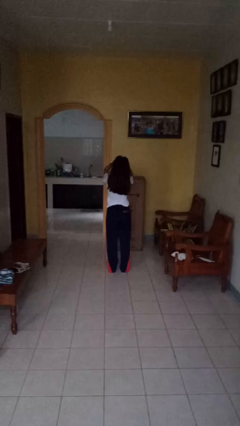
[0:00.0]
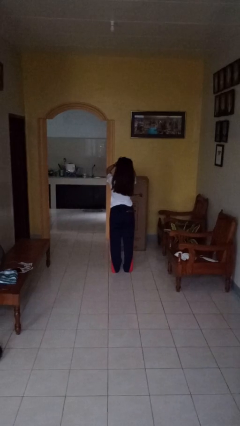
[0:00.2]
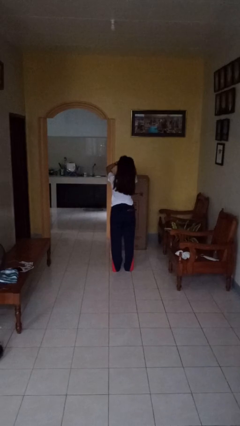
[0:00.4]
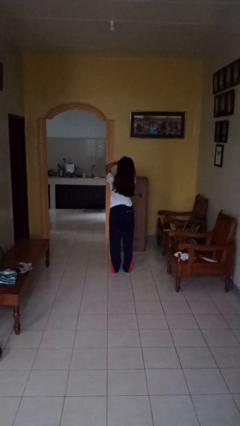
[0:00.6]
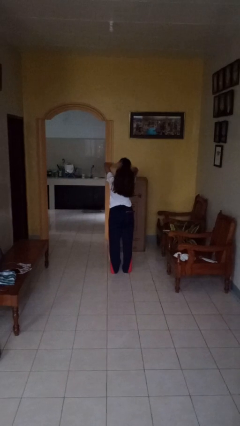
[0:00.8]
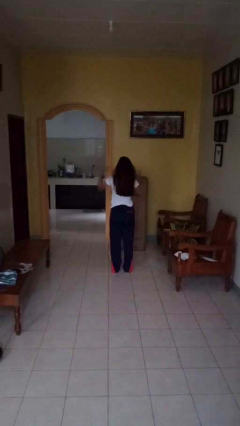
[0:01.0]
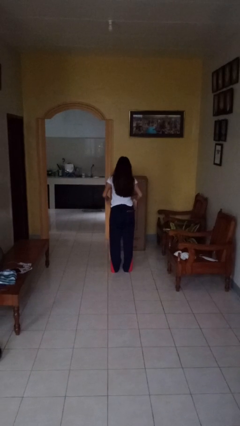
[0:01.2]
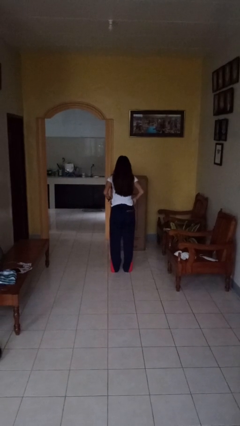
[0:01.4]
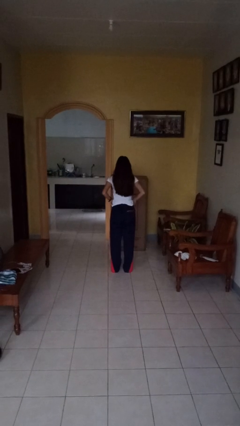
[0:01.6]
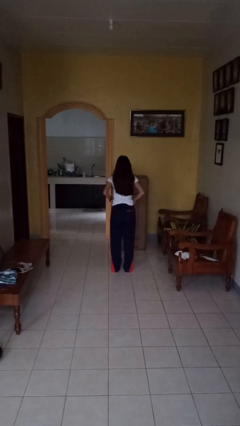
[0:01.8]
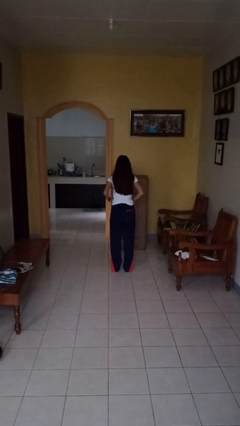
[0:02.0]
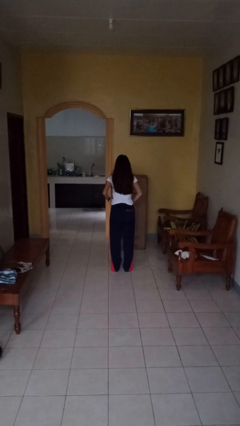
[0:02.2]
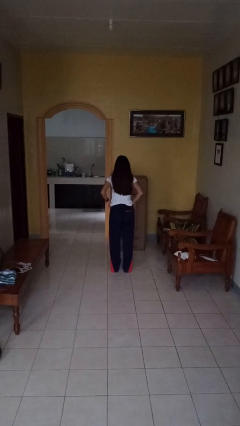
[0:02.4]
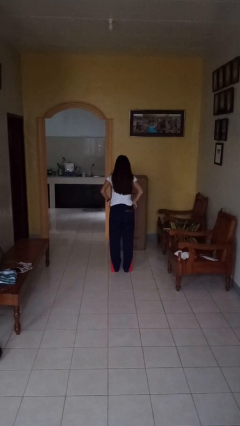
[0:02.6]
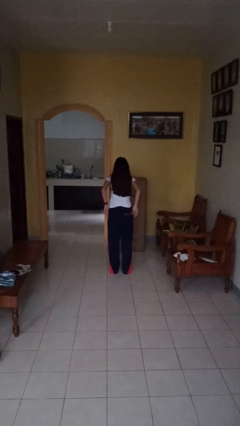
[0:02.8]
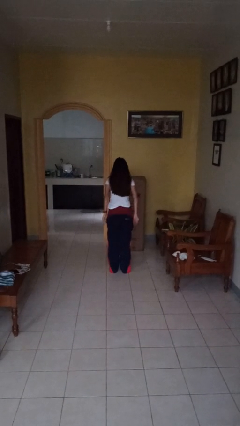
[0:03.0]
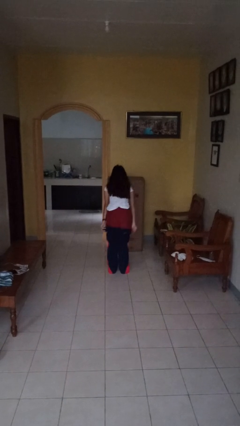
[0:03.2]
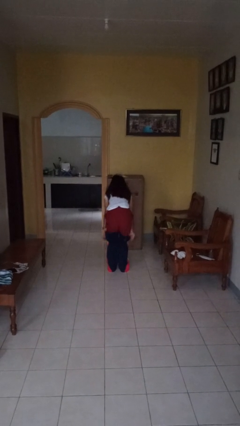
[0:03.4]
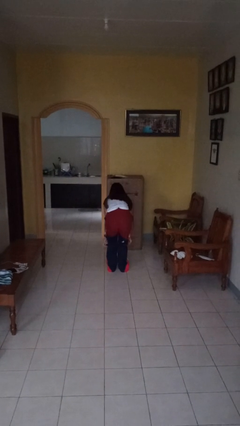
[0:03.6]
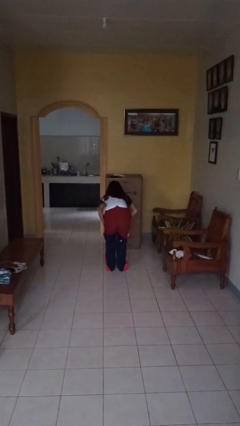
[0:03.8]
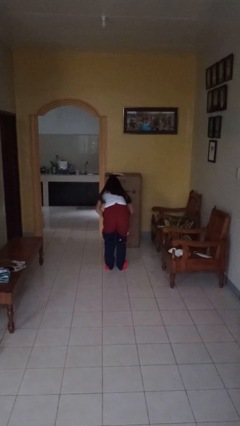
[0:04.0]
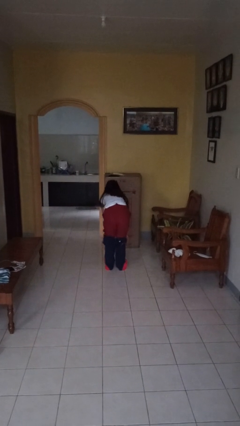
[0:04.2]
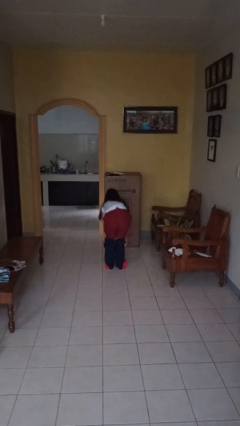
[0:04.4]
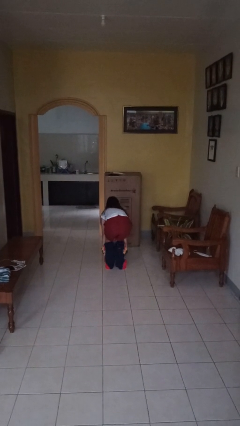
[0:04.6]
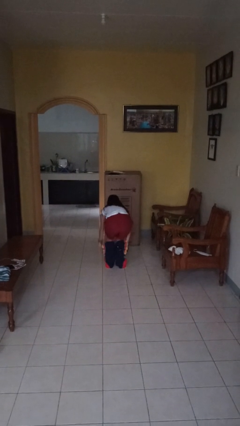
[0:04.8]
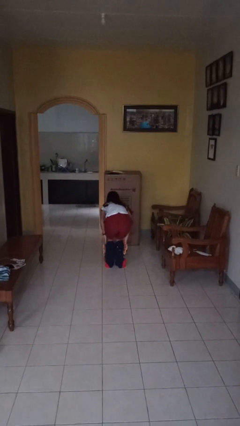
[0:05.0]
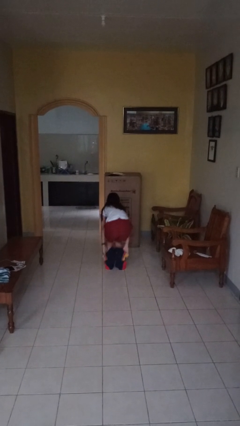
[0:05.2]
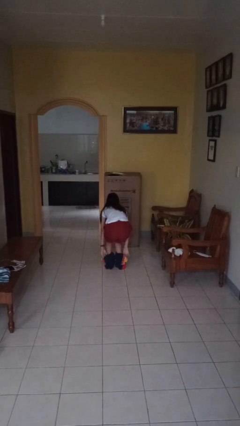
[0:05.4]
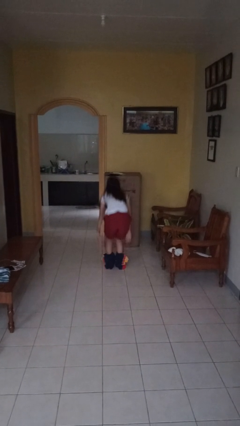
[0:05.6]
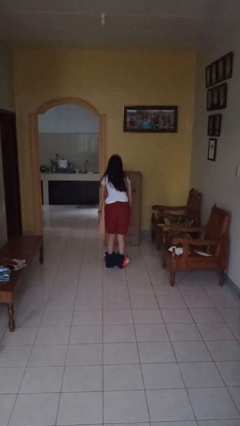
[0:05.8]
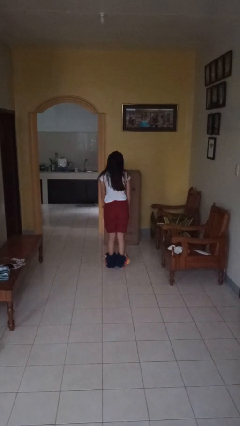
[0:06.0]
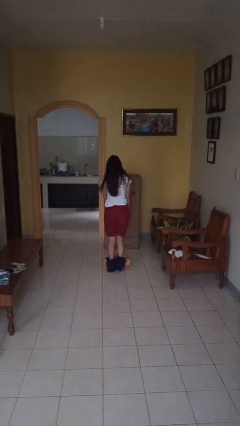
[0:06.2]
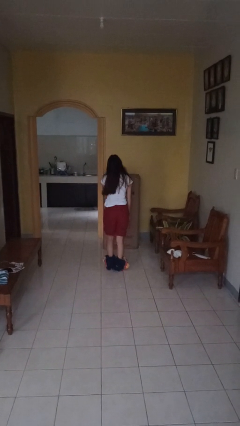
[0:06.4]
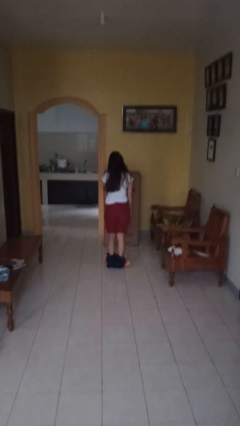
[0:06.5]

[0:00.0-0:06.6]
person takes off pants

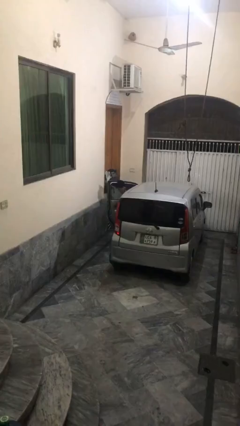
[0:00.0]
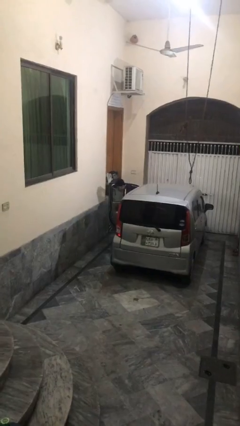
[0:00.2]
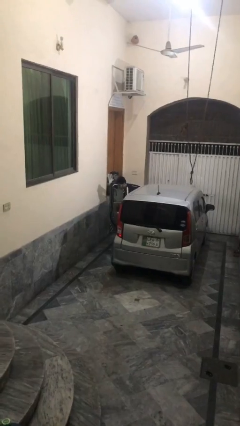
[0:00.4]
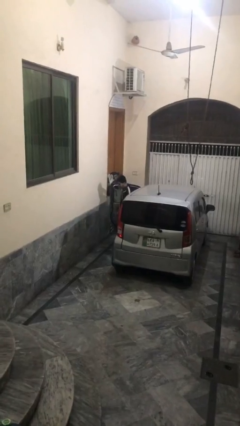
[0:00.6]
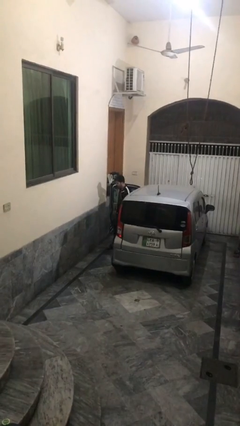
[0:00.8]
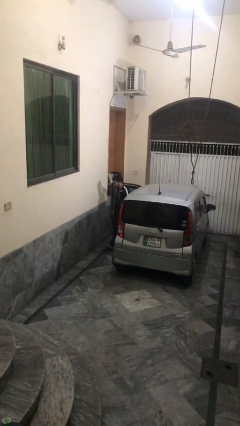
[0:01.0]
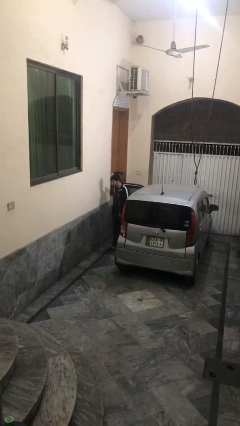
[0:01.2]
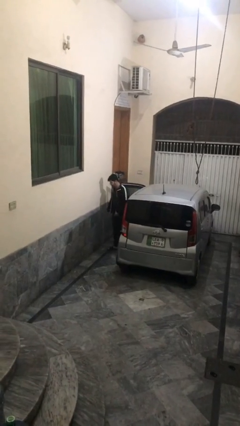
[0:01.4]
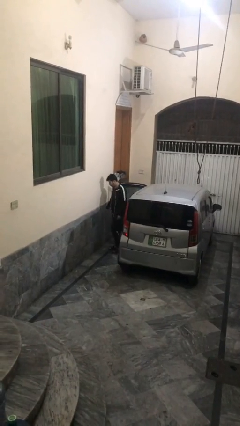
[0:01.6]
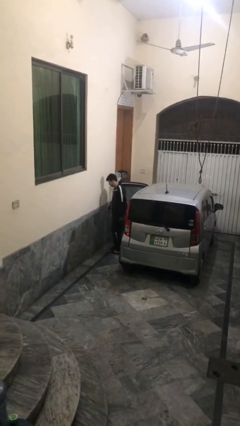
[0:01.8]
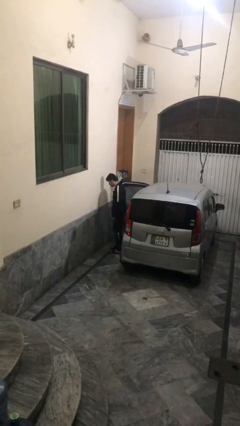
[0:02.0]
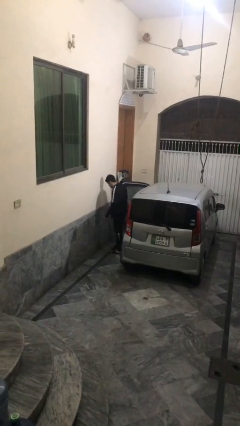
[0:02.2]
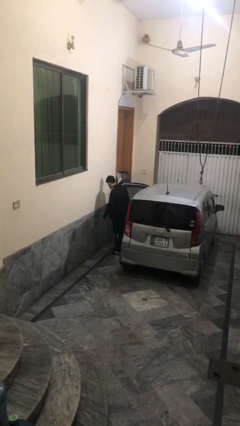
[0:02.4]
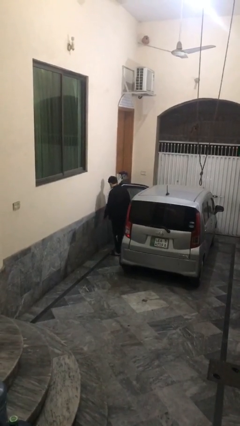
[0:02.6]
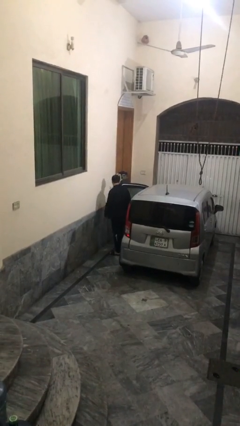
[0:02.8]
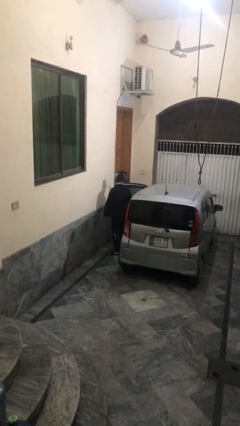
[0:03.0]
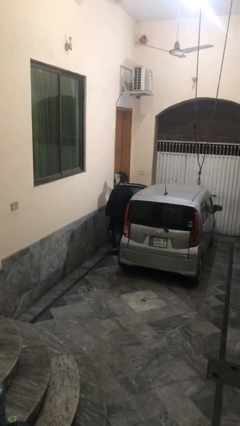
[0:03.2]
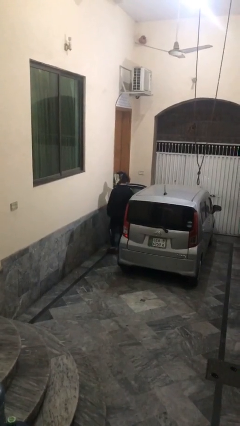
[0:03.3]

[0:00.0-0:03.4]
person exits car

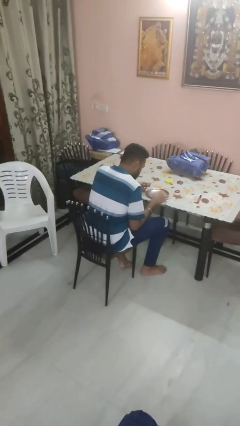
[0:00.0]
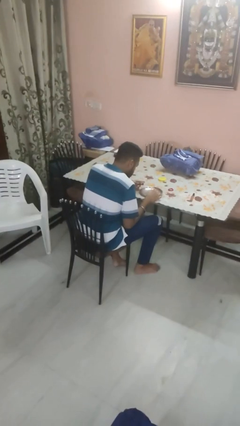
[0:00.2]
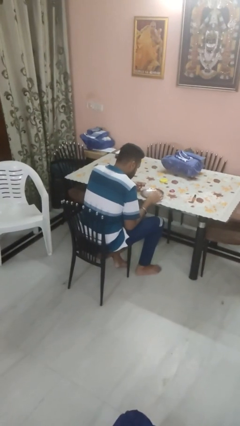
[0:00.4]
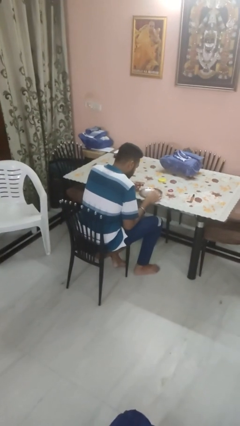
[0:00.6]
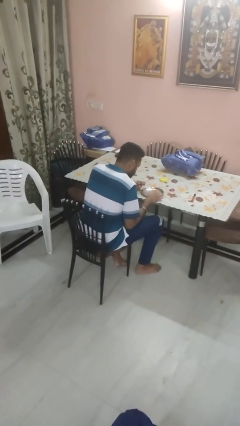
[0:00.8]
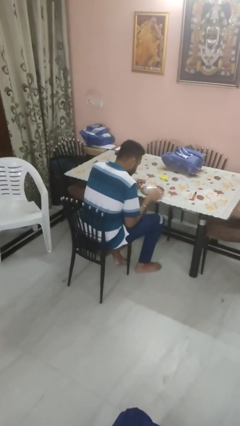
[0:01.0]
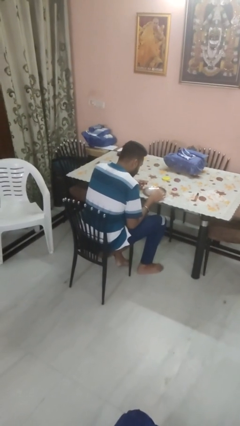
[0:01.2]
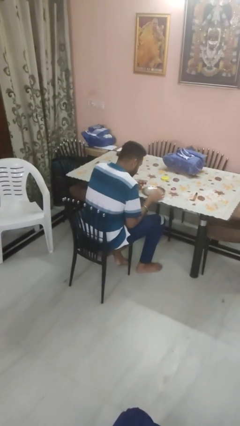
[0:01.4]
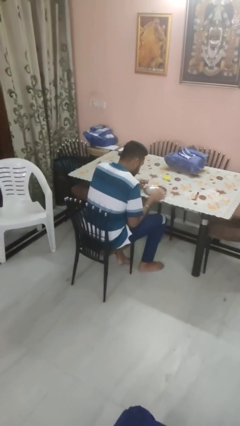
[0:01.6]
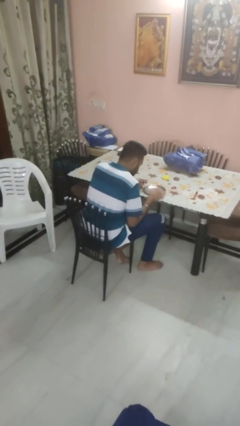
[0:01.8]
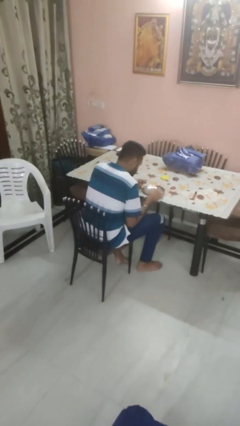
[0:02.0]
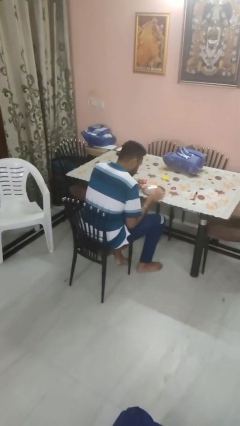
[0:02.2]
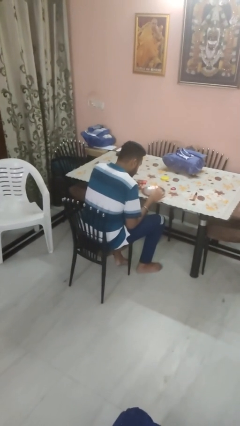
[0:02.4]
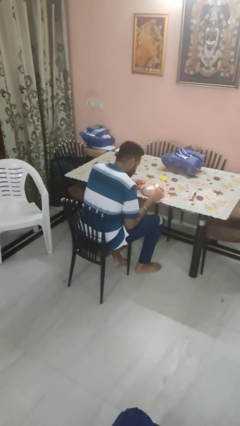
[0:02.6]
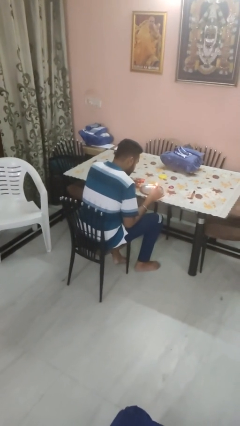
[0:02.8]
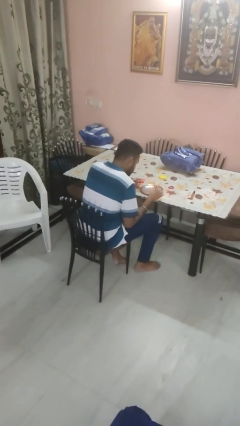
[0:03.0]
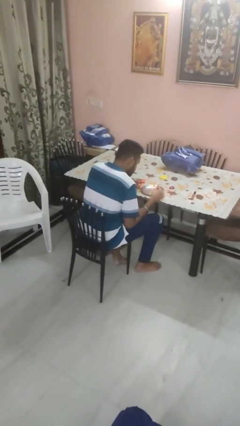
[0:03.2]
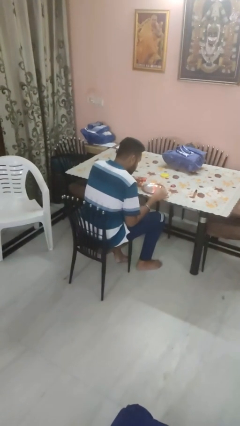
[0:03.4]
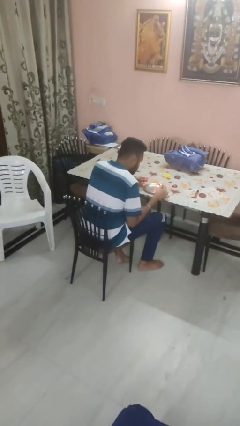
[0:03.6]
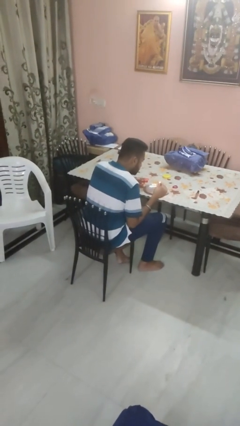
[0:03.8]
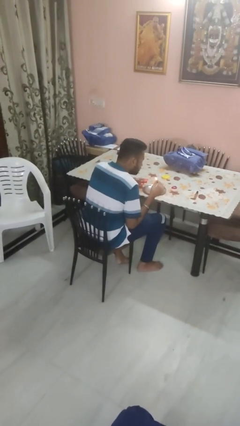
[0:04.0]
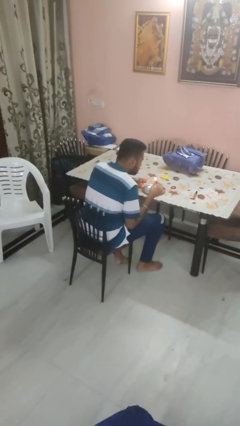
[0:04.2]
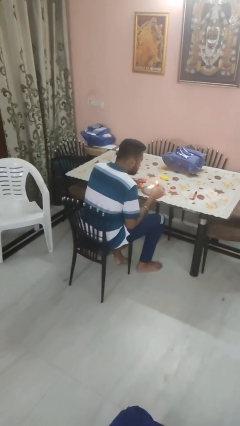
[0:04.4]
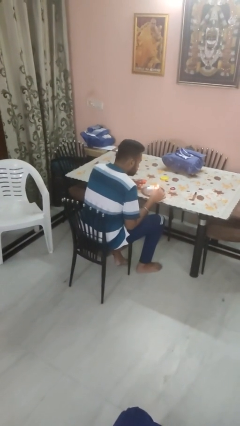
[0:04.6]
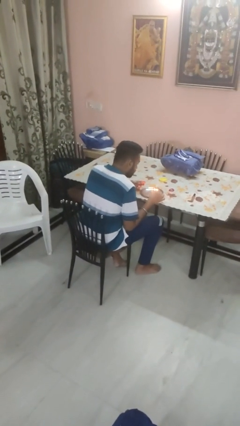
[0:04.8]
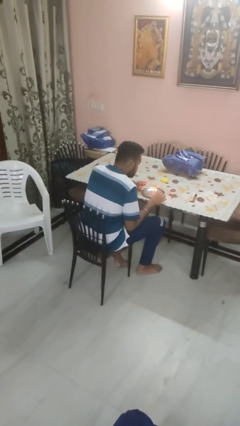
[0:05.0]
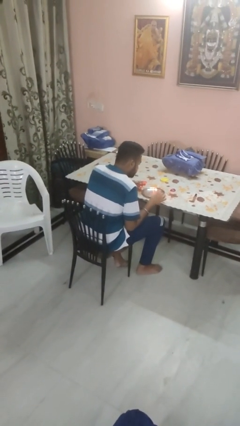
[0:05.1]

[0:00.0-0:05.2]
person lights candle

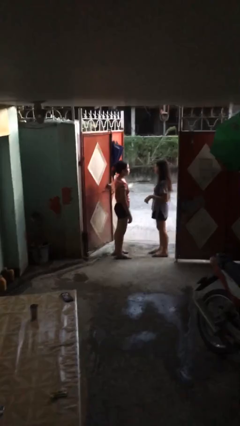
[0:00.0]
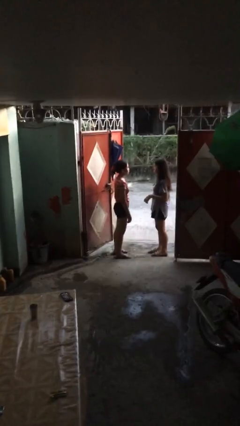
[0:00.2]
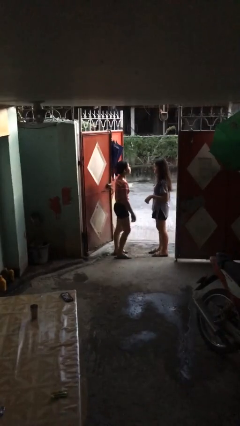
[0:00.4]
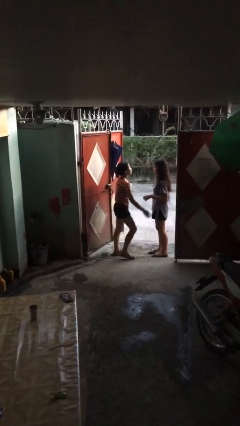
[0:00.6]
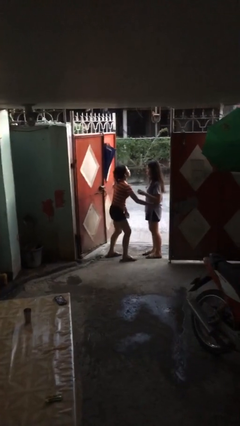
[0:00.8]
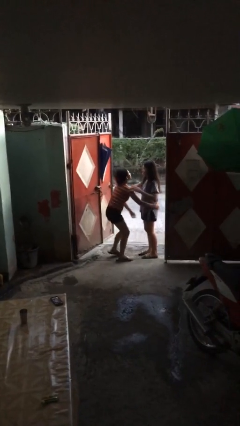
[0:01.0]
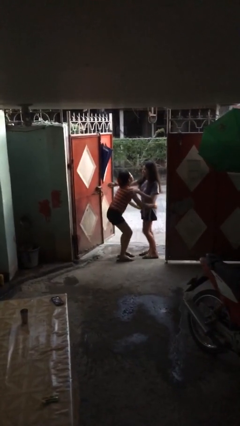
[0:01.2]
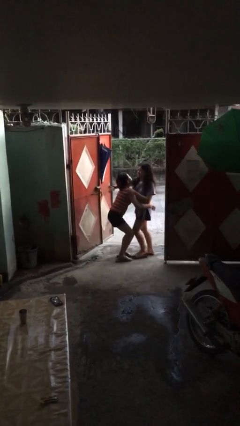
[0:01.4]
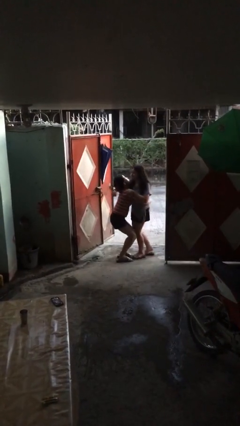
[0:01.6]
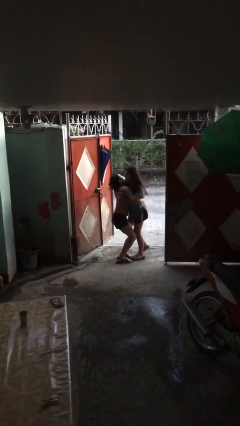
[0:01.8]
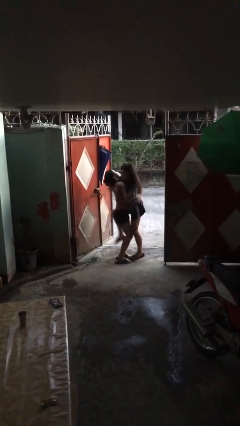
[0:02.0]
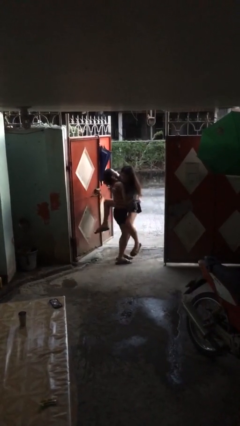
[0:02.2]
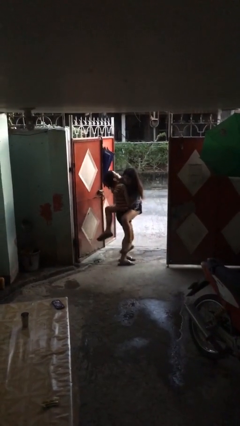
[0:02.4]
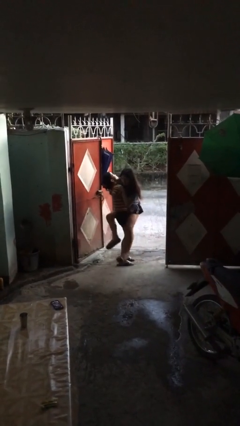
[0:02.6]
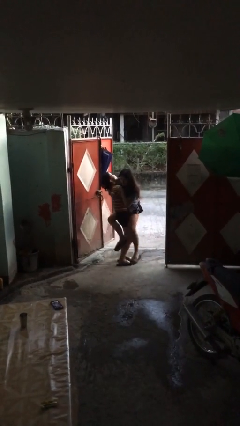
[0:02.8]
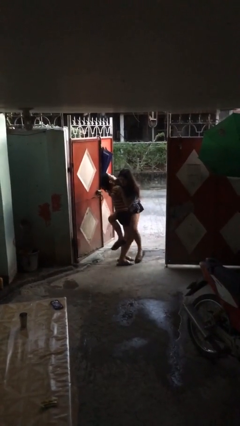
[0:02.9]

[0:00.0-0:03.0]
person picks up person
